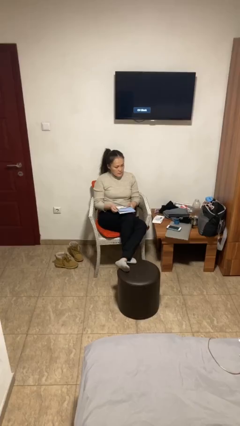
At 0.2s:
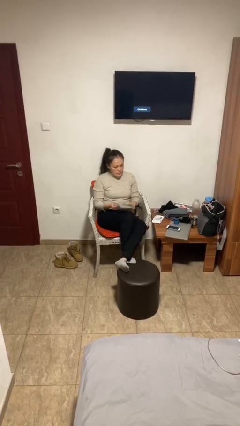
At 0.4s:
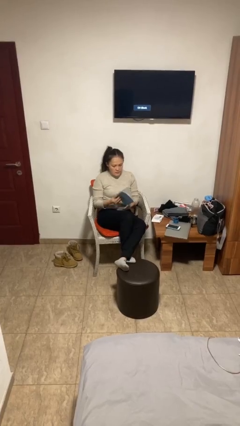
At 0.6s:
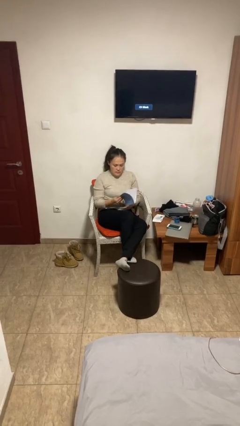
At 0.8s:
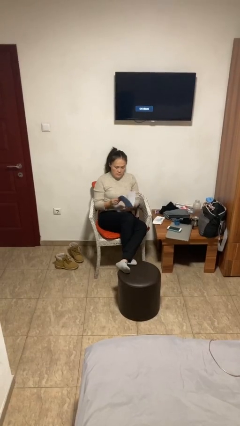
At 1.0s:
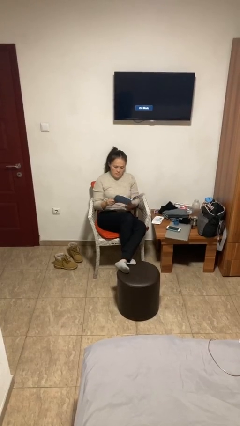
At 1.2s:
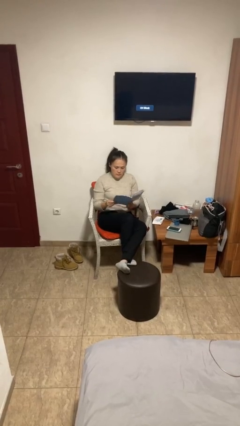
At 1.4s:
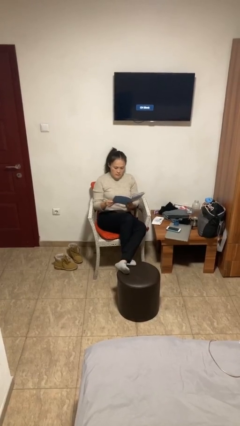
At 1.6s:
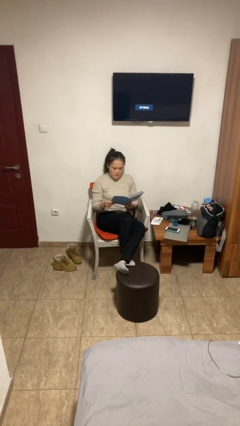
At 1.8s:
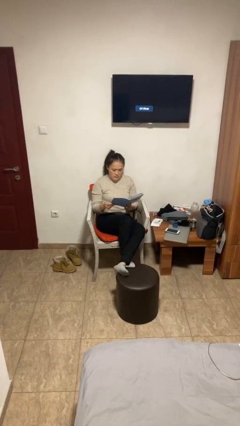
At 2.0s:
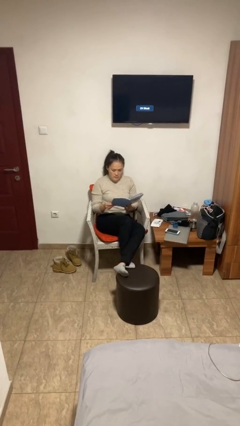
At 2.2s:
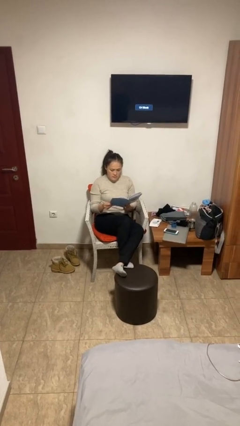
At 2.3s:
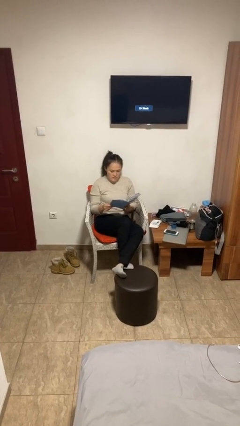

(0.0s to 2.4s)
person reads document

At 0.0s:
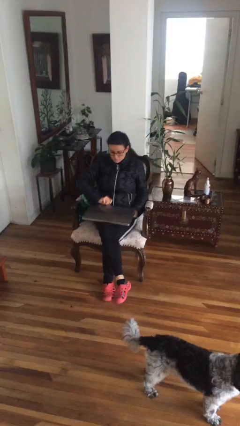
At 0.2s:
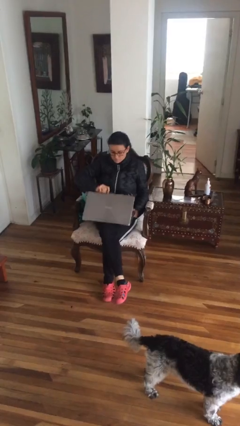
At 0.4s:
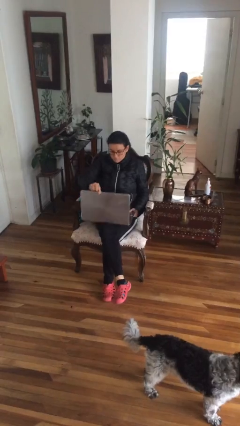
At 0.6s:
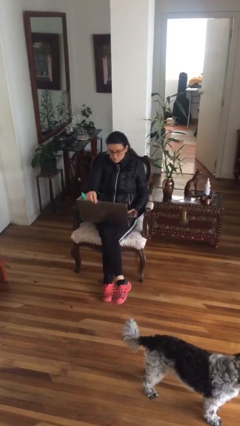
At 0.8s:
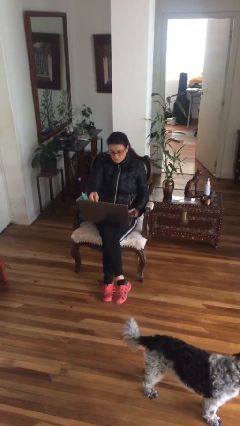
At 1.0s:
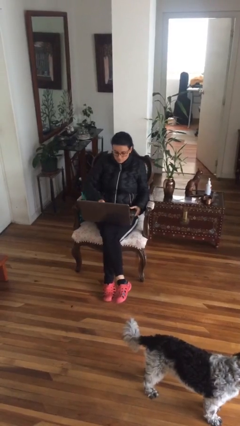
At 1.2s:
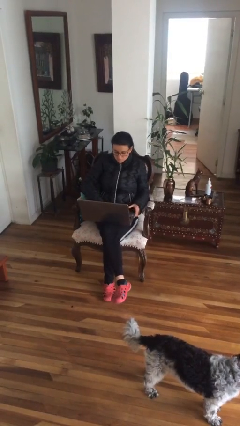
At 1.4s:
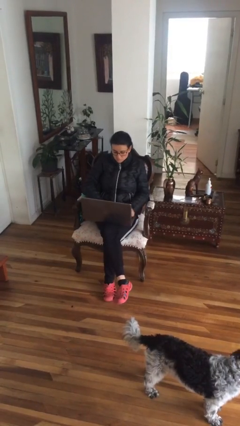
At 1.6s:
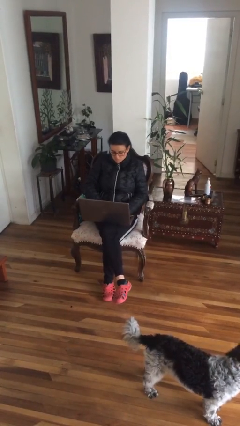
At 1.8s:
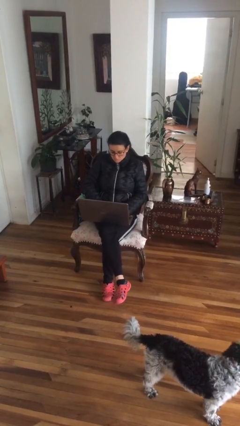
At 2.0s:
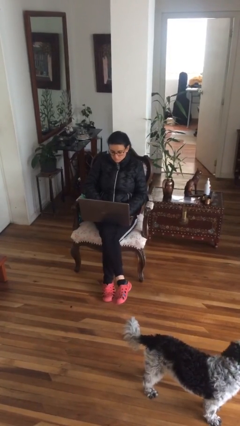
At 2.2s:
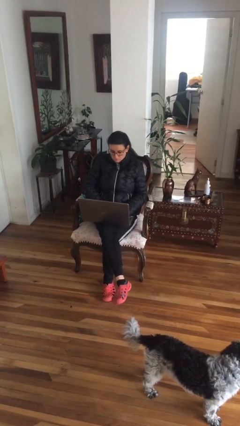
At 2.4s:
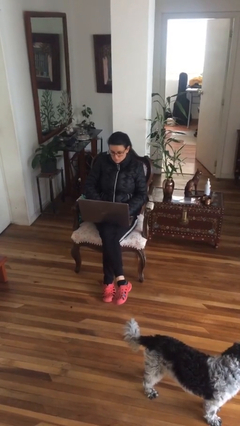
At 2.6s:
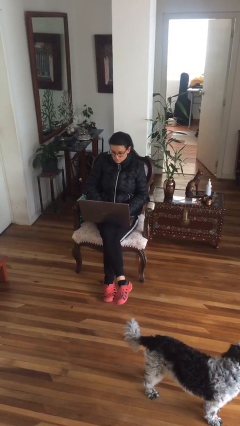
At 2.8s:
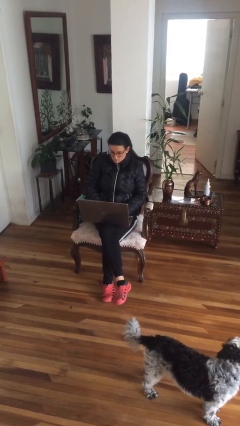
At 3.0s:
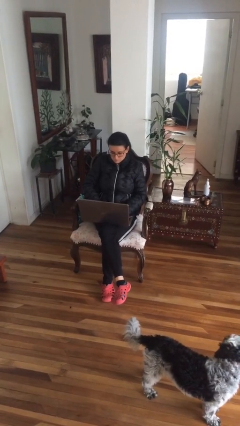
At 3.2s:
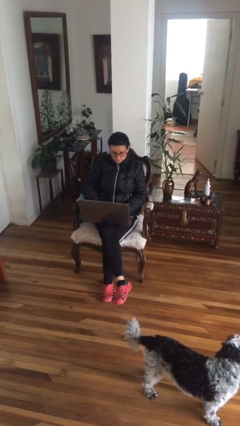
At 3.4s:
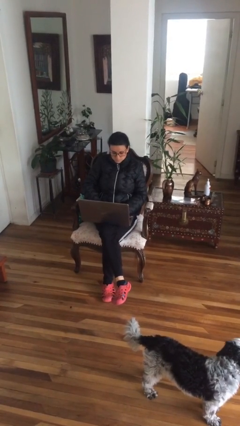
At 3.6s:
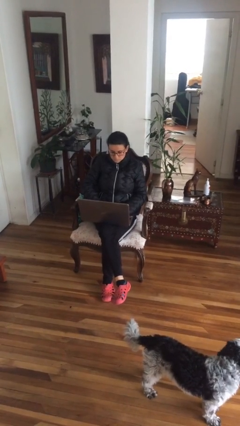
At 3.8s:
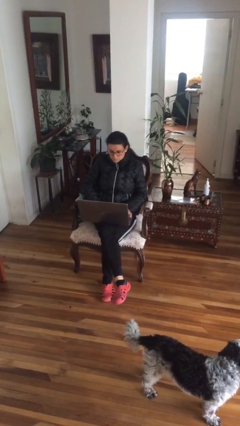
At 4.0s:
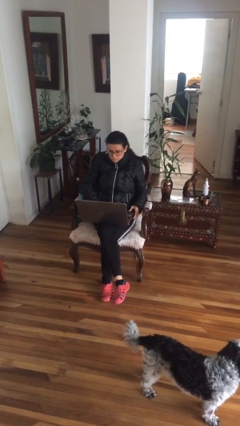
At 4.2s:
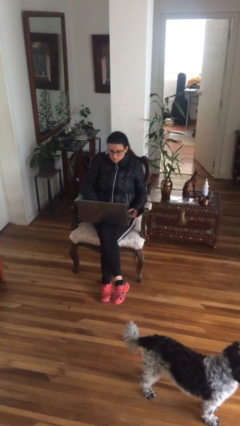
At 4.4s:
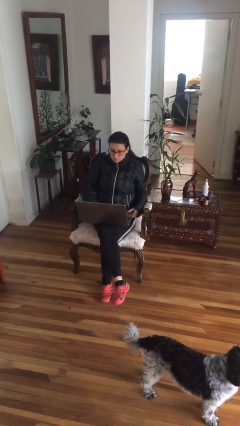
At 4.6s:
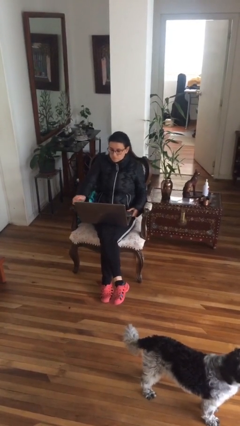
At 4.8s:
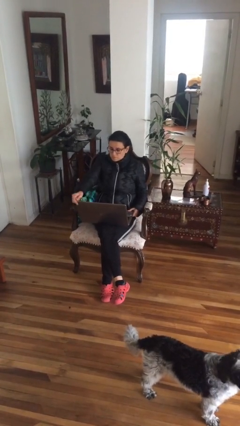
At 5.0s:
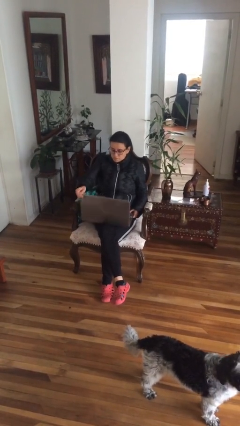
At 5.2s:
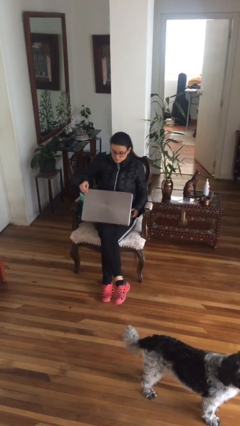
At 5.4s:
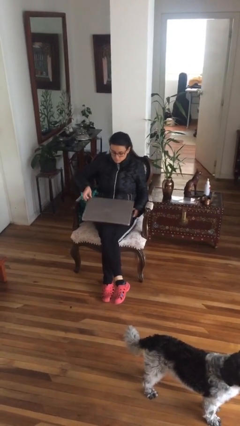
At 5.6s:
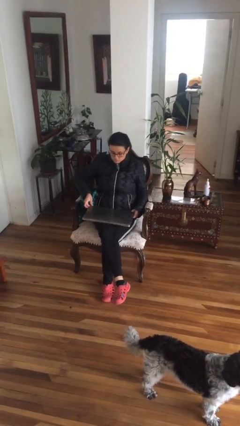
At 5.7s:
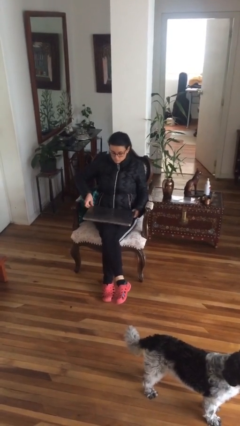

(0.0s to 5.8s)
person interacts with laptop

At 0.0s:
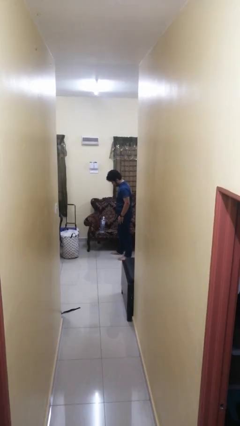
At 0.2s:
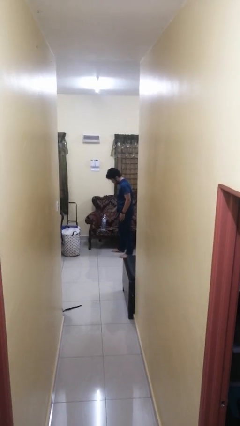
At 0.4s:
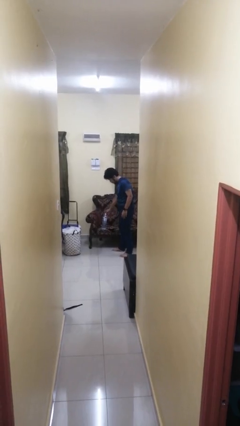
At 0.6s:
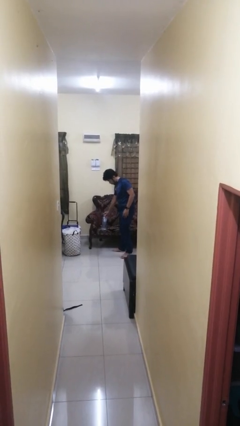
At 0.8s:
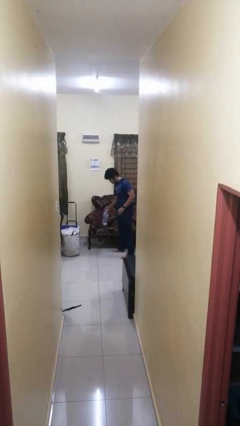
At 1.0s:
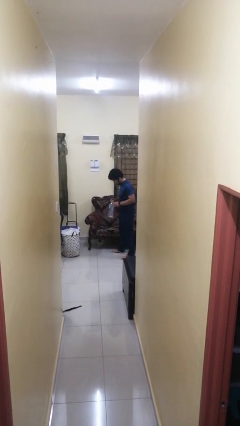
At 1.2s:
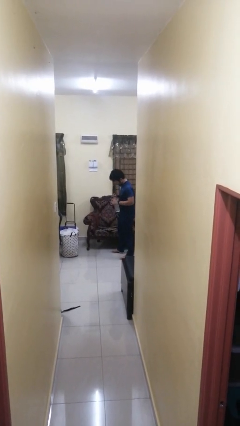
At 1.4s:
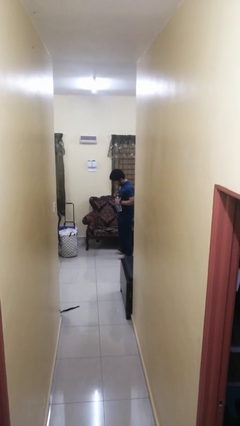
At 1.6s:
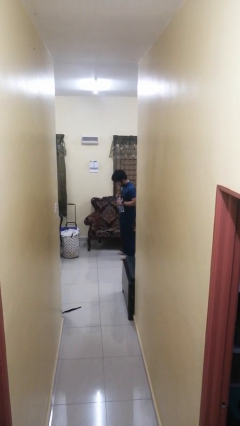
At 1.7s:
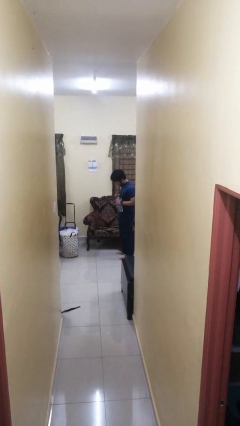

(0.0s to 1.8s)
person picks up object from couch

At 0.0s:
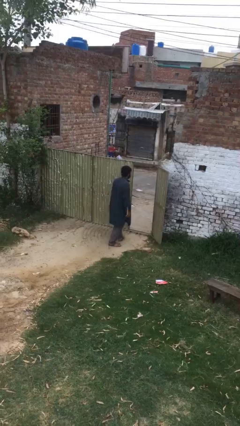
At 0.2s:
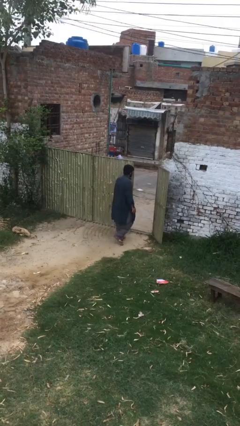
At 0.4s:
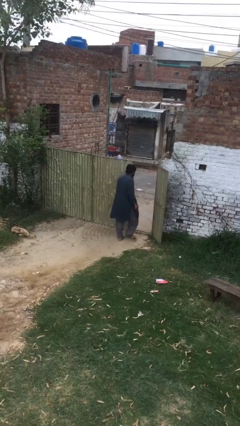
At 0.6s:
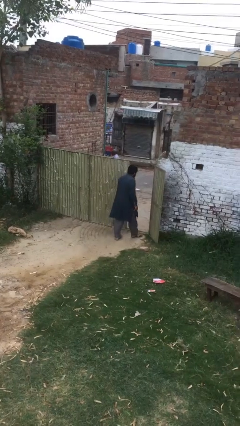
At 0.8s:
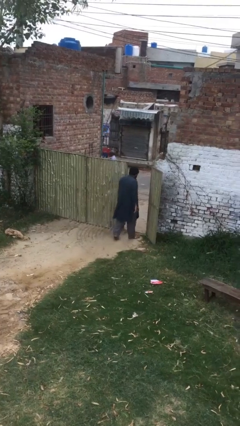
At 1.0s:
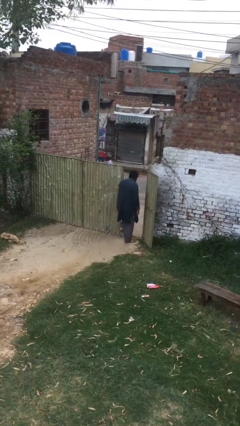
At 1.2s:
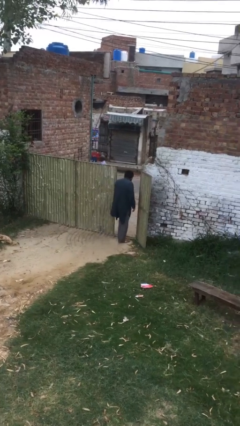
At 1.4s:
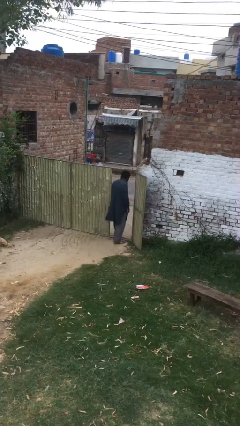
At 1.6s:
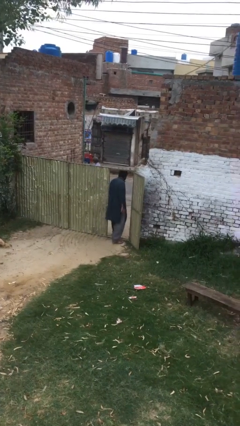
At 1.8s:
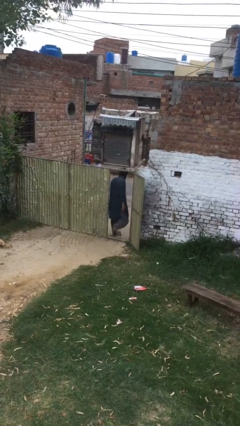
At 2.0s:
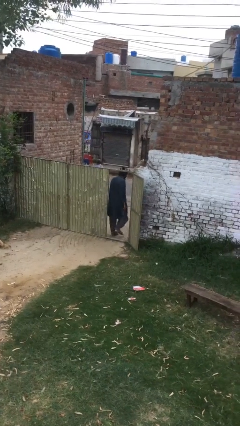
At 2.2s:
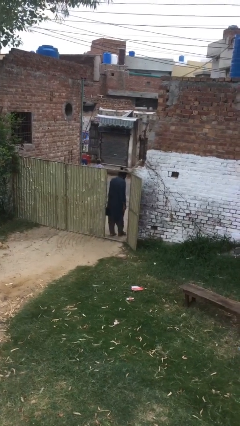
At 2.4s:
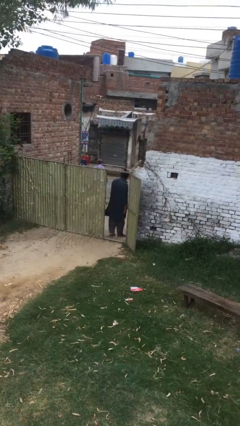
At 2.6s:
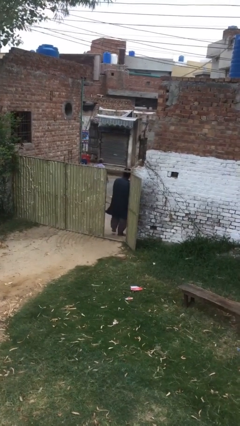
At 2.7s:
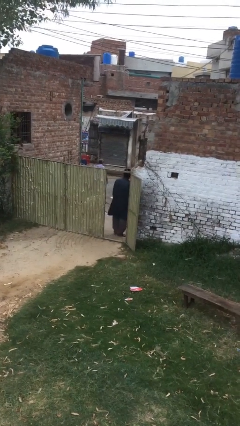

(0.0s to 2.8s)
person exits scene through structure

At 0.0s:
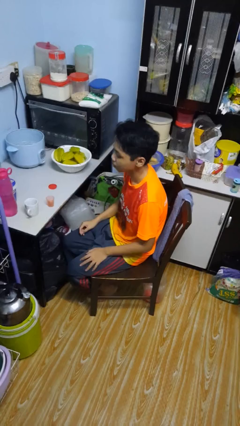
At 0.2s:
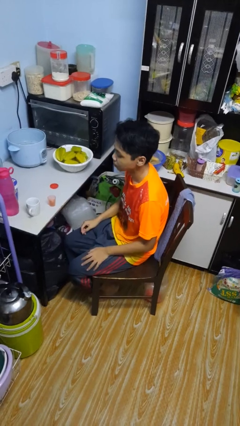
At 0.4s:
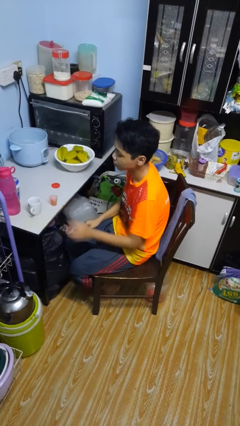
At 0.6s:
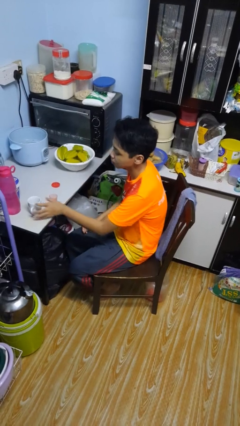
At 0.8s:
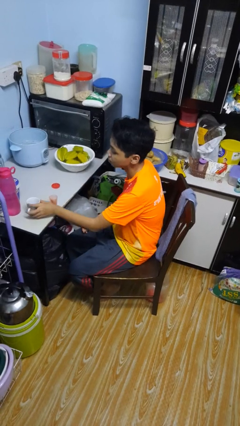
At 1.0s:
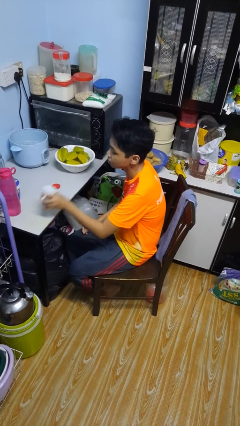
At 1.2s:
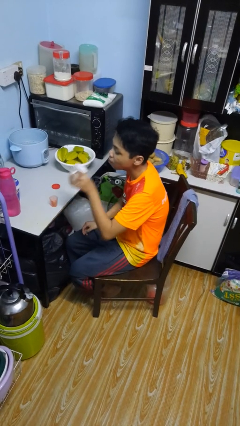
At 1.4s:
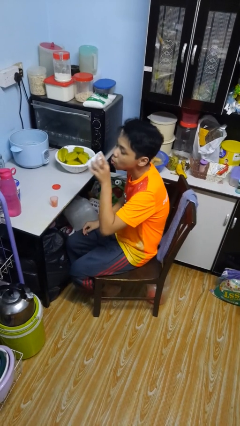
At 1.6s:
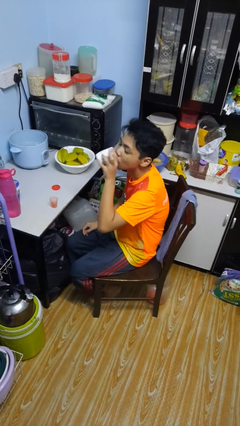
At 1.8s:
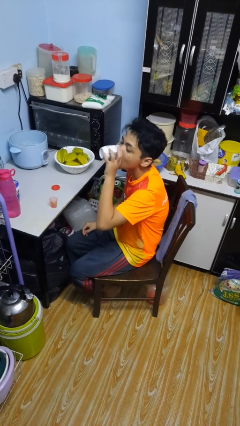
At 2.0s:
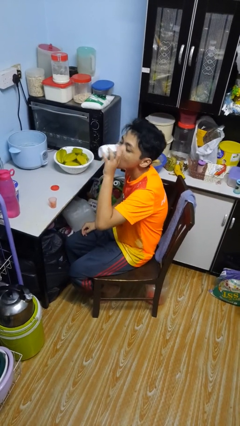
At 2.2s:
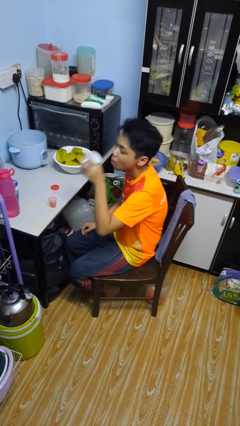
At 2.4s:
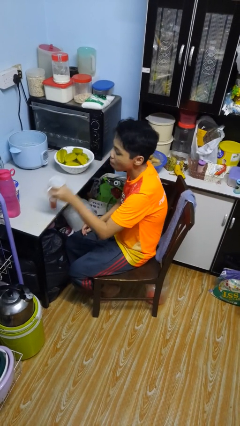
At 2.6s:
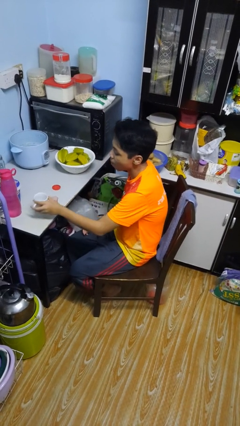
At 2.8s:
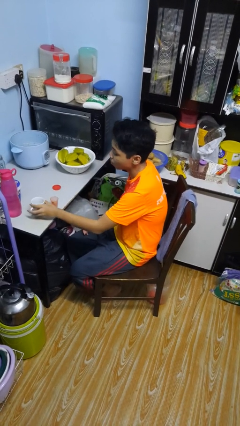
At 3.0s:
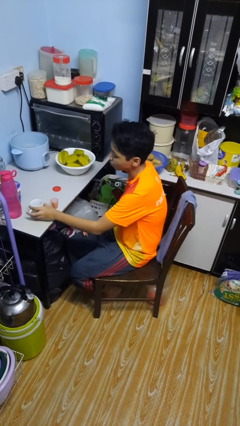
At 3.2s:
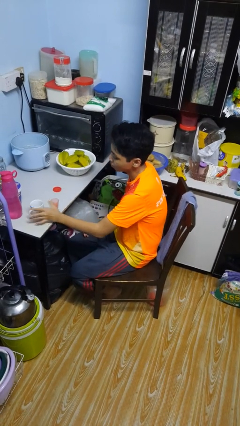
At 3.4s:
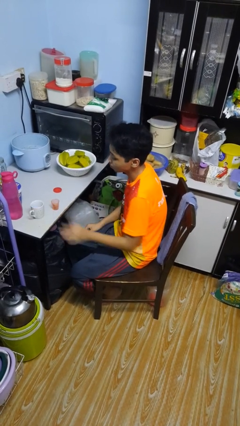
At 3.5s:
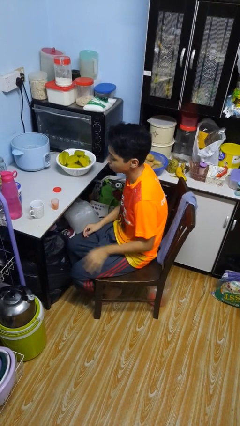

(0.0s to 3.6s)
person drinks from cup

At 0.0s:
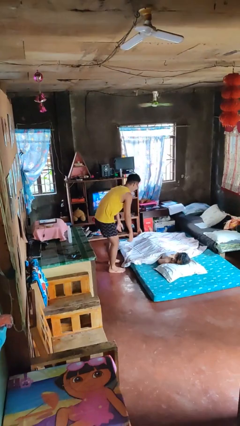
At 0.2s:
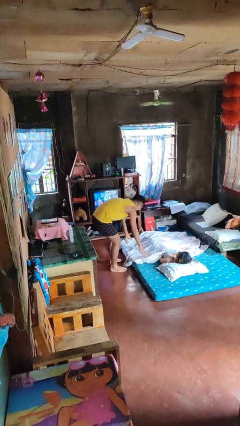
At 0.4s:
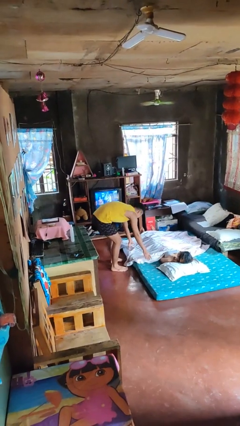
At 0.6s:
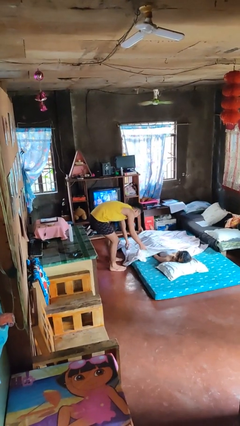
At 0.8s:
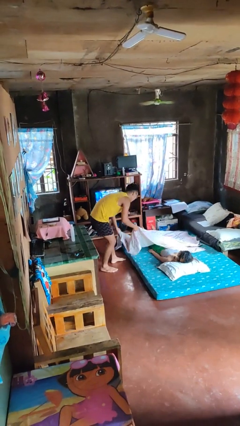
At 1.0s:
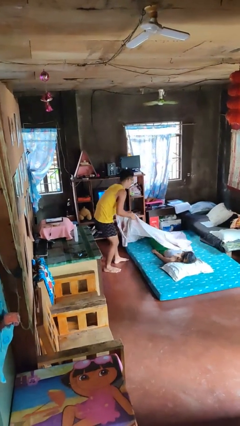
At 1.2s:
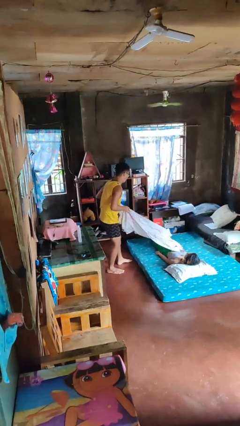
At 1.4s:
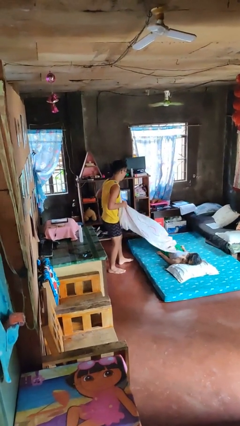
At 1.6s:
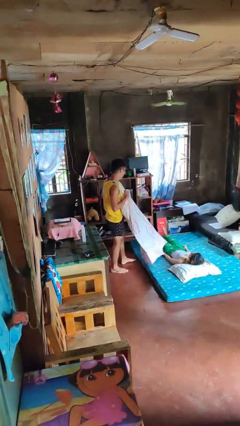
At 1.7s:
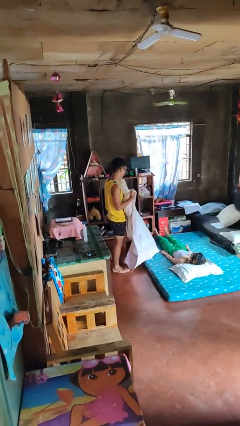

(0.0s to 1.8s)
person uncovers friend with blanket
